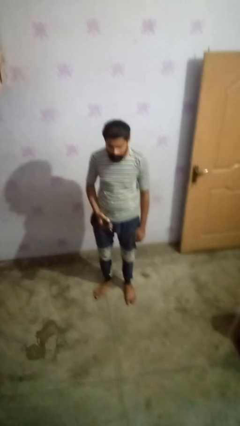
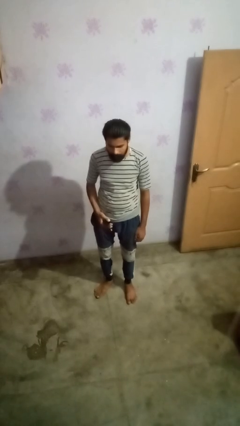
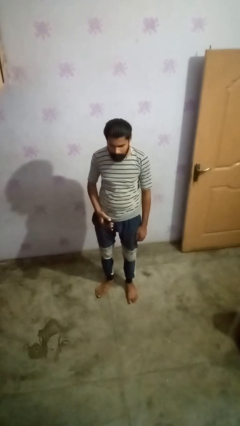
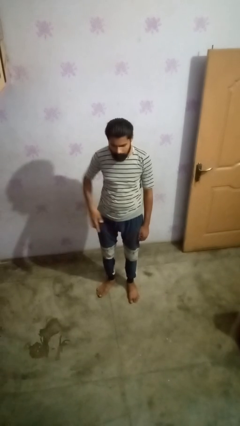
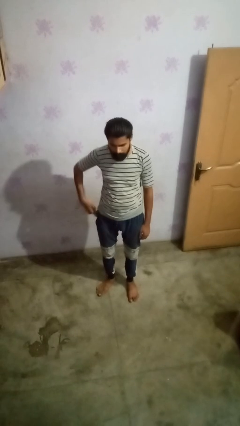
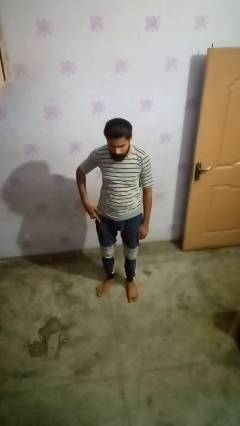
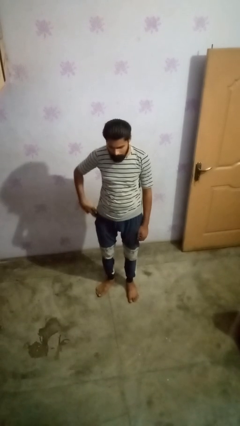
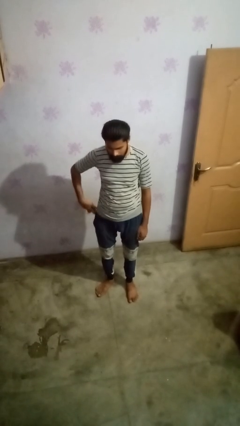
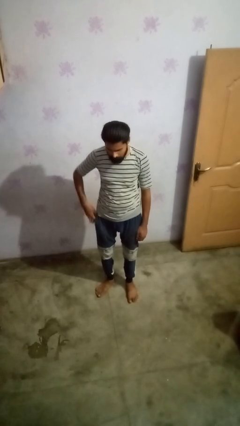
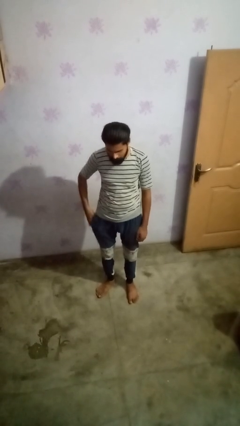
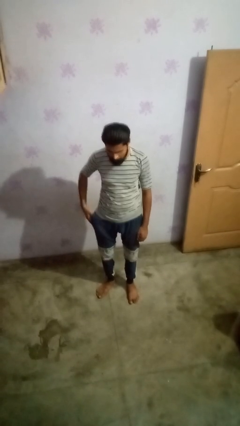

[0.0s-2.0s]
person puts phone into pocket

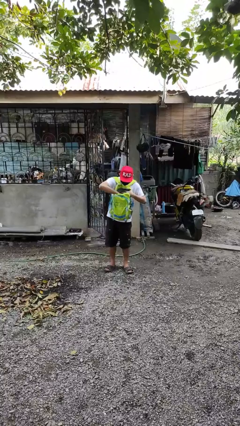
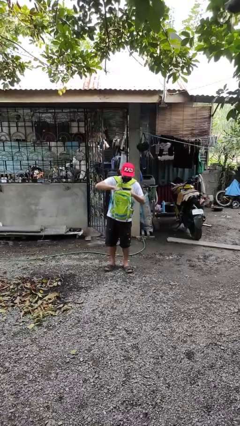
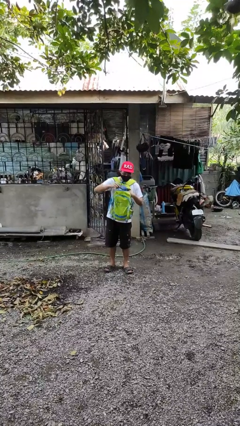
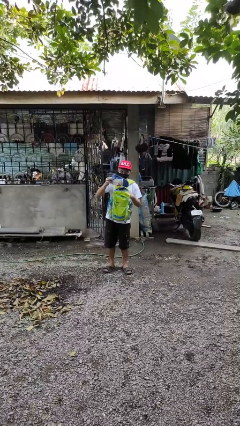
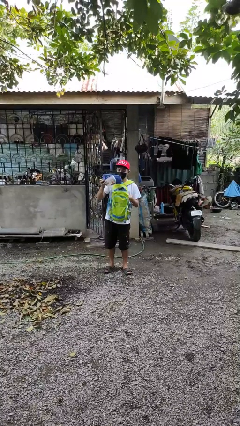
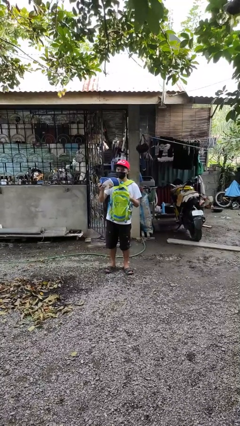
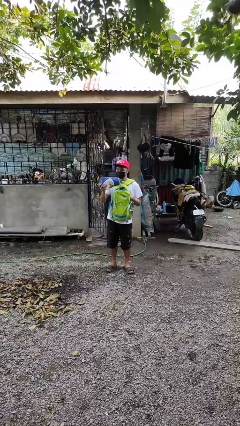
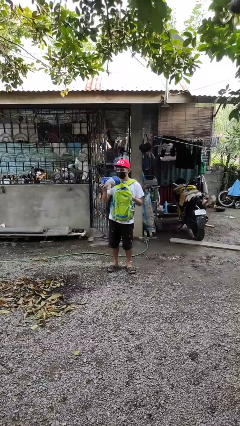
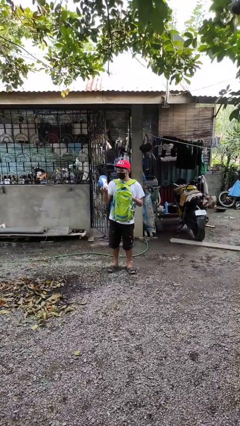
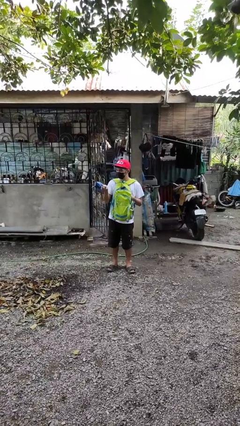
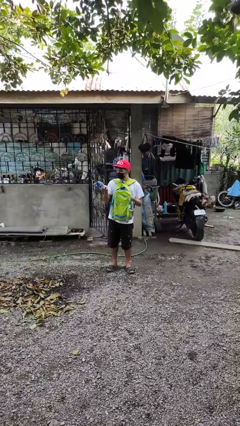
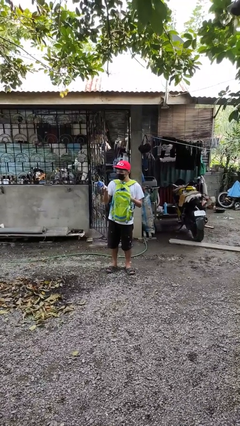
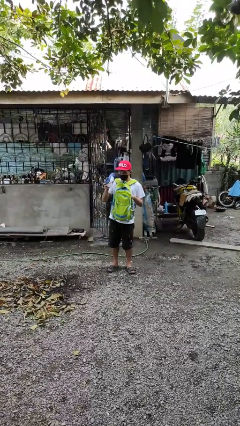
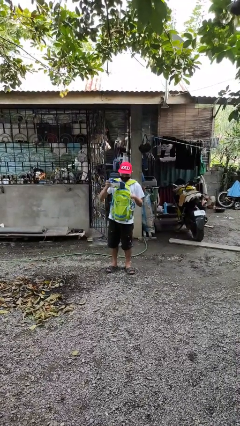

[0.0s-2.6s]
person takes object from backpack

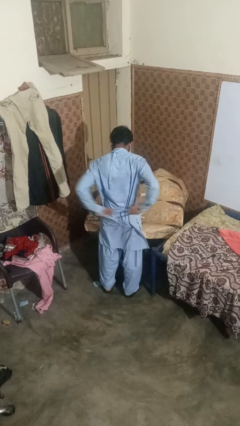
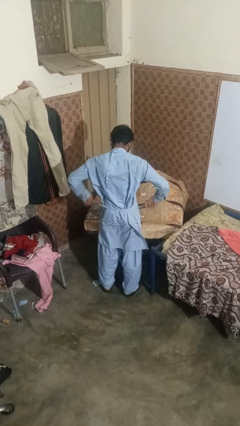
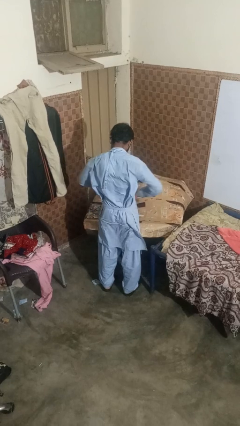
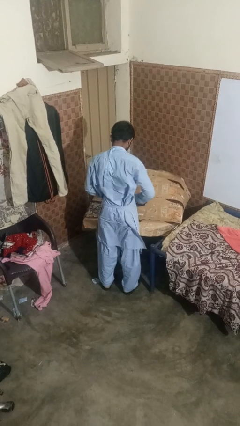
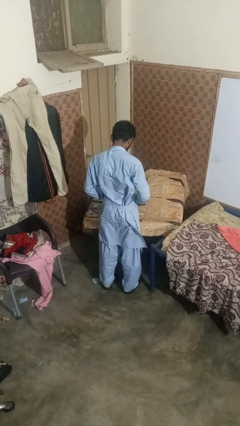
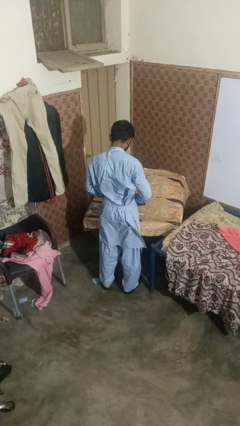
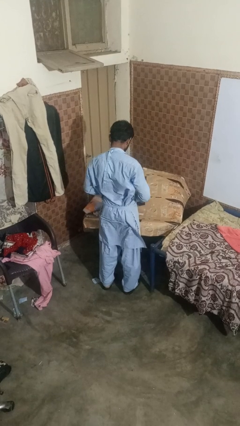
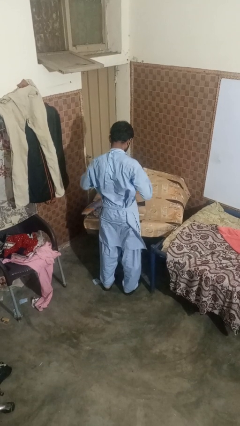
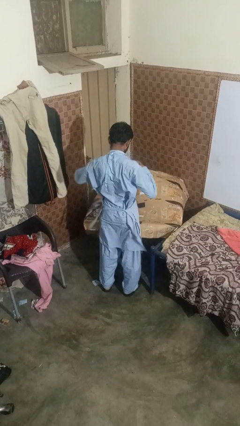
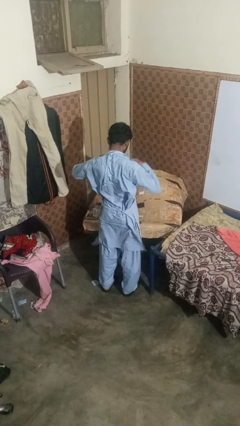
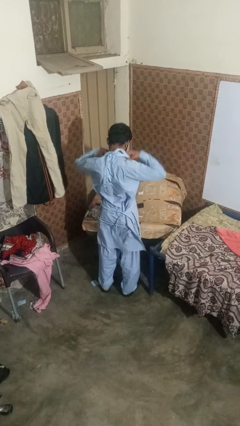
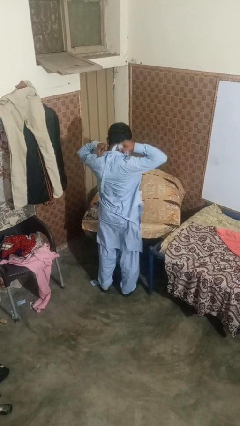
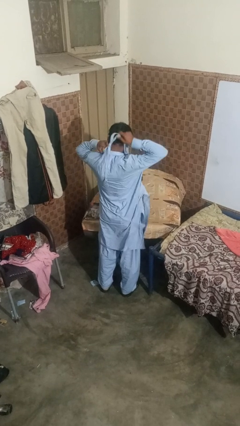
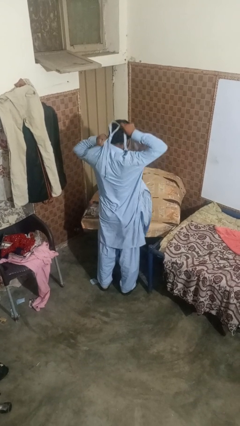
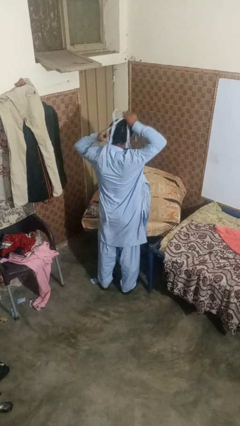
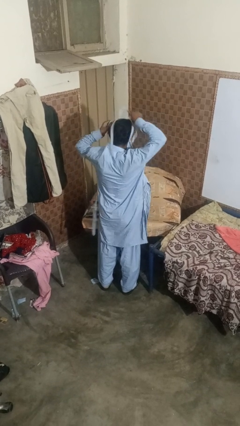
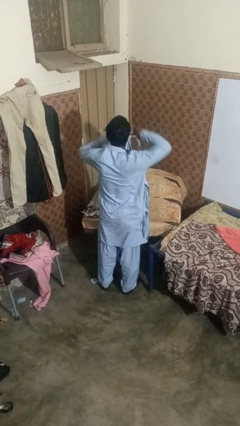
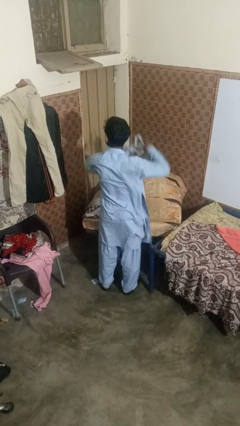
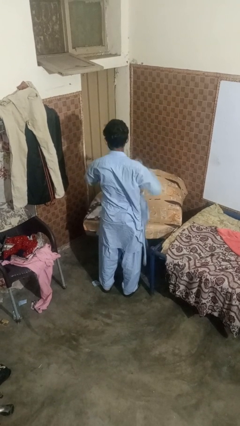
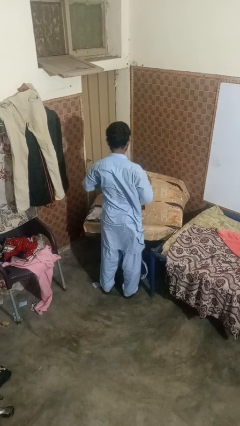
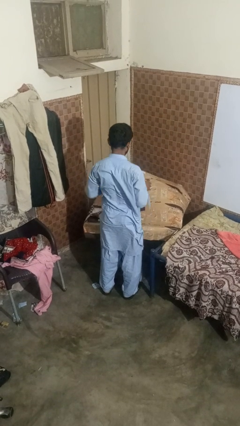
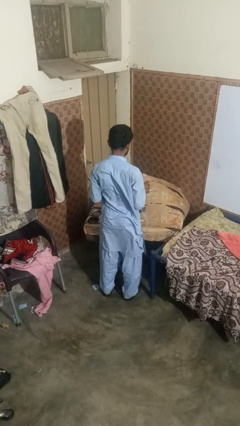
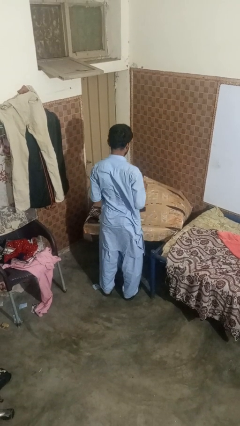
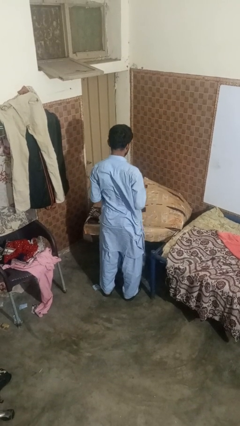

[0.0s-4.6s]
person takes off apron

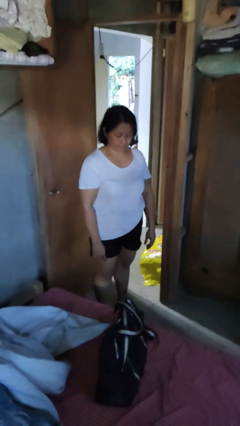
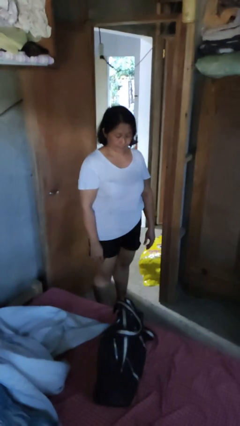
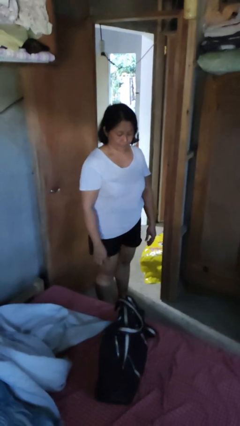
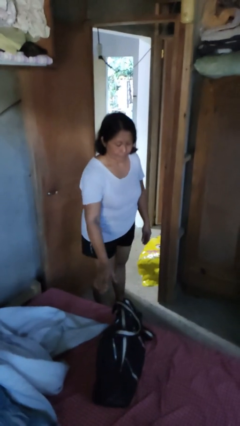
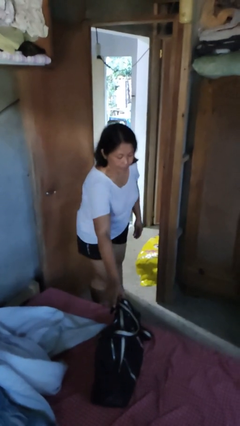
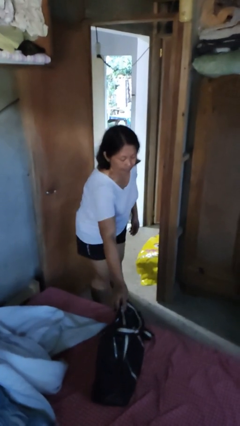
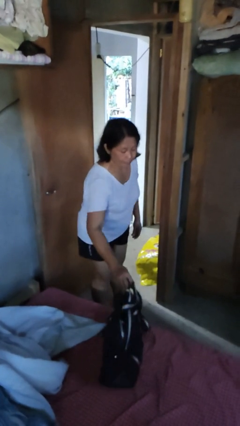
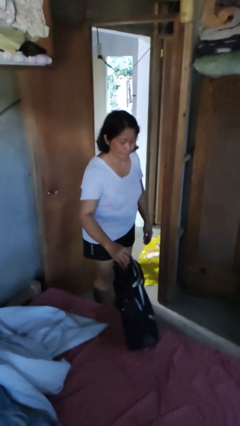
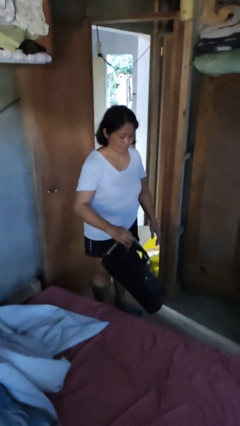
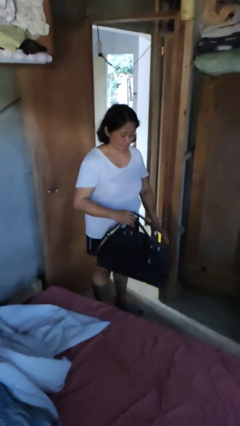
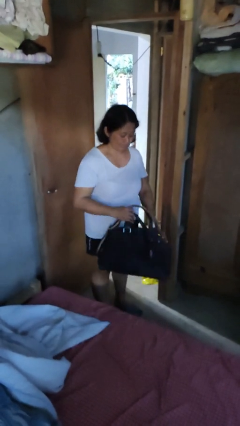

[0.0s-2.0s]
person picks up object from bed

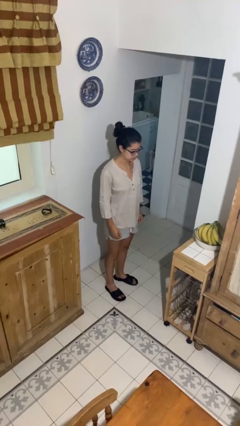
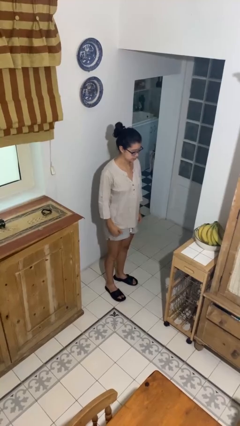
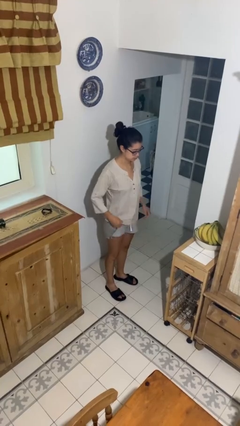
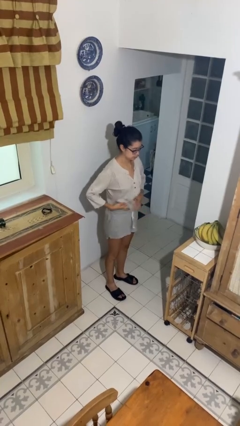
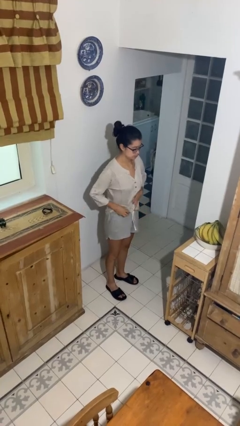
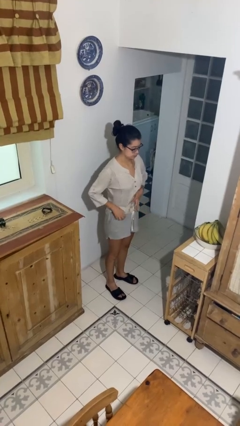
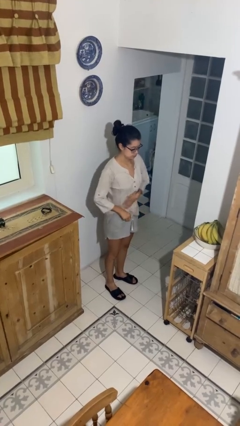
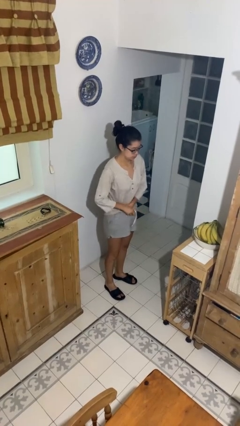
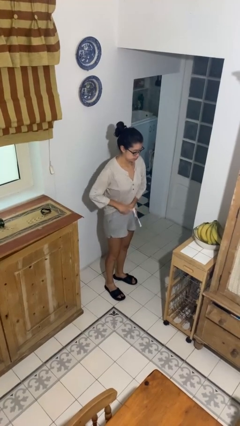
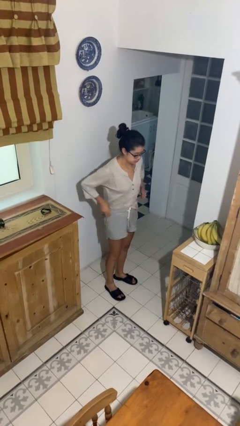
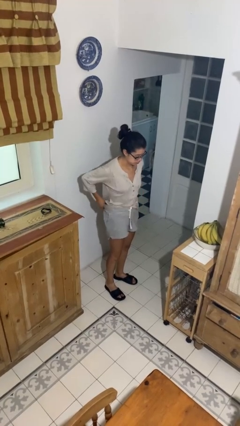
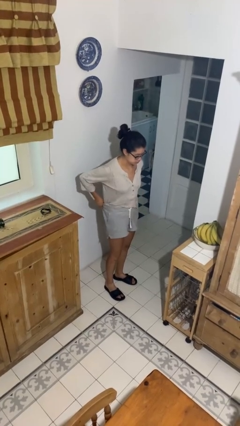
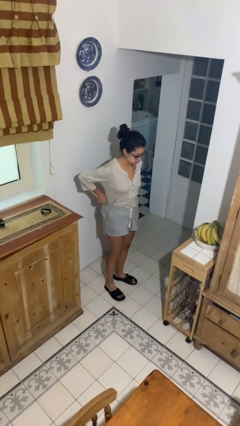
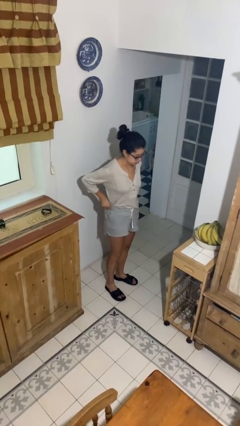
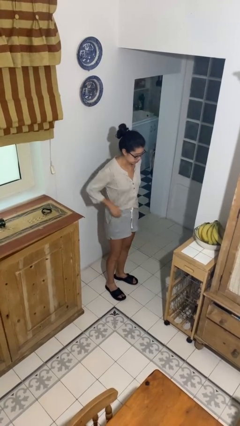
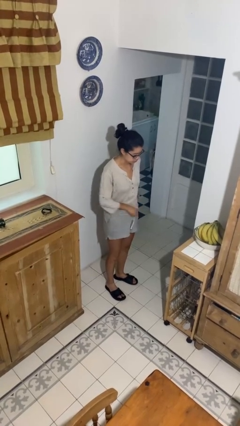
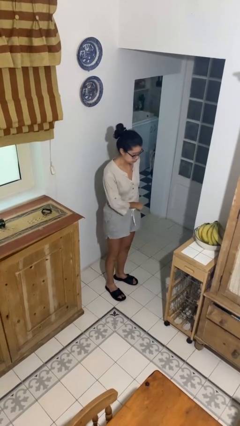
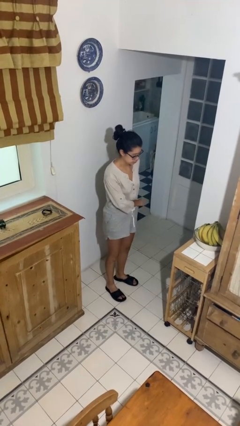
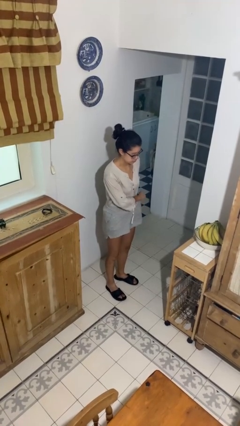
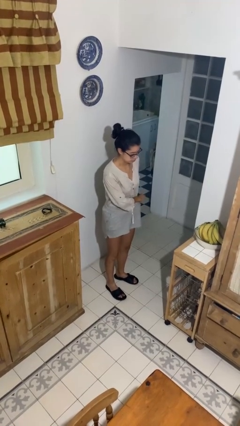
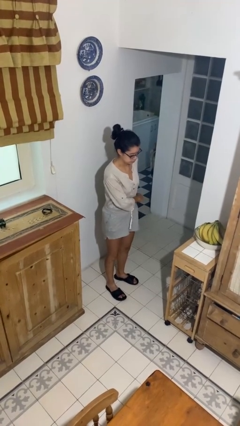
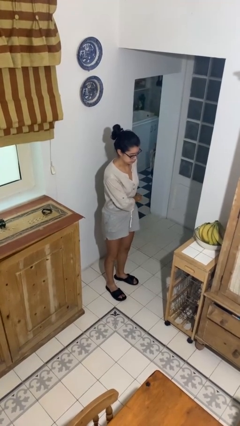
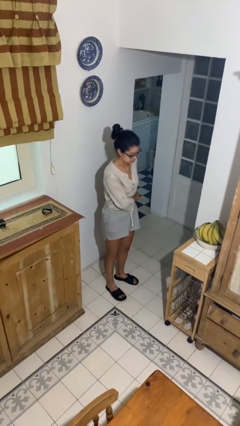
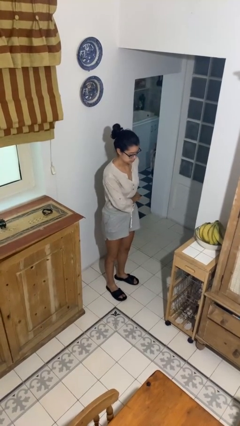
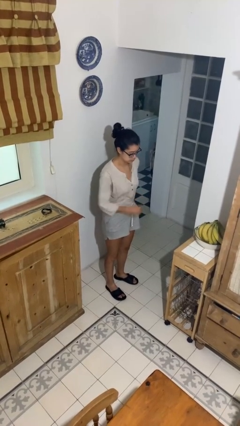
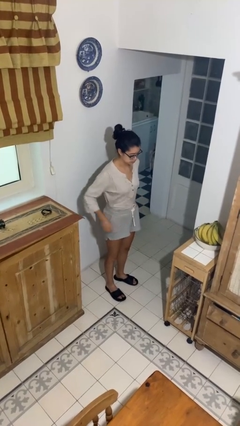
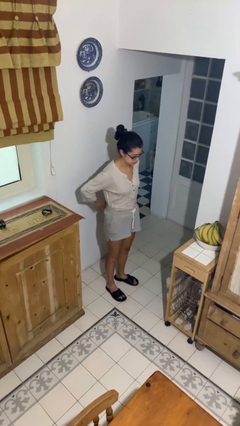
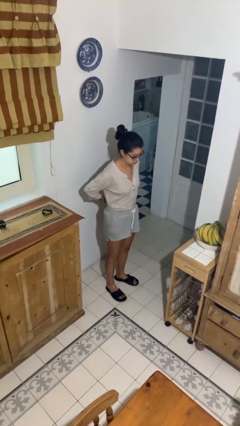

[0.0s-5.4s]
person tucks in shirt

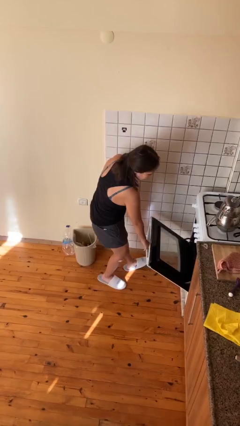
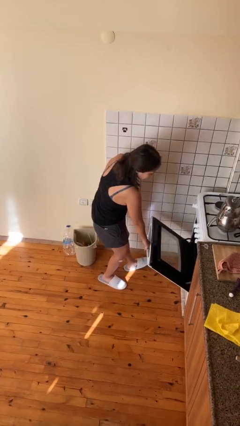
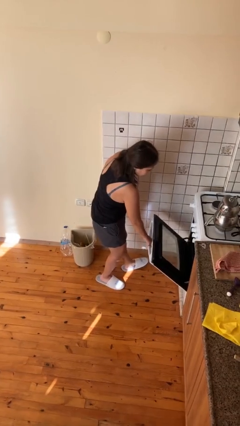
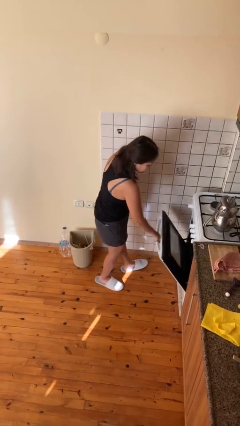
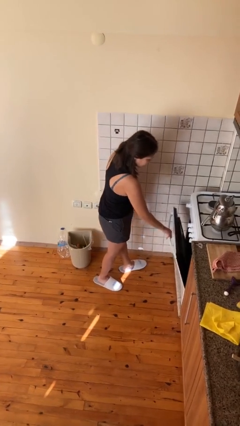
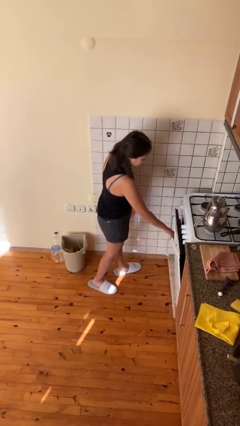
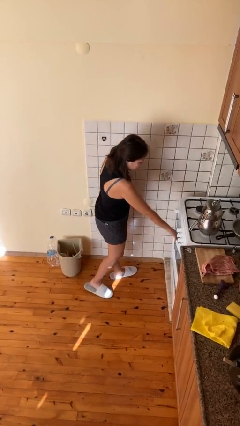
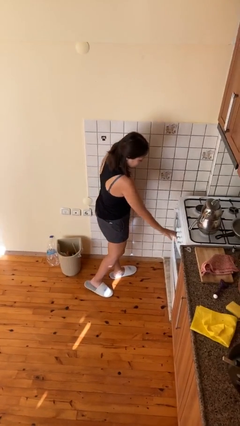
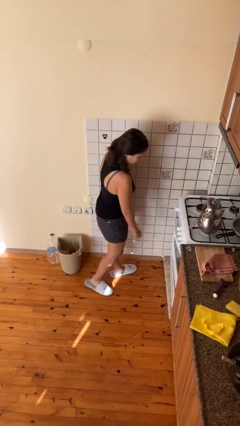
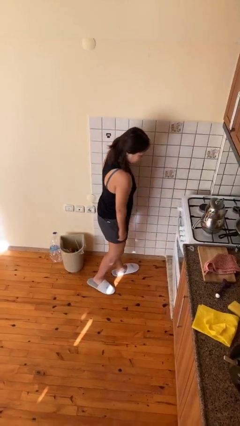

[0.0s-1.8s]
person closes oven door
